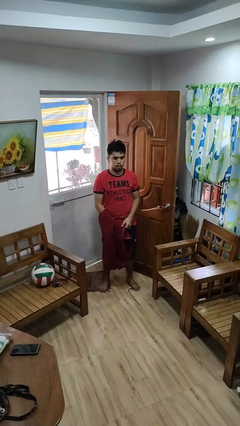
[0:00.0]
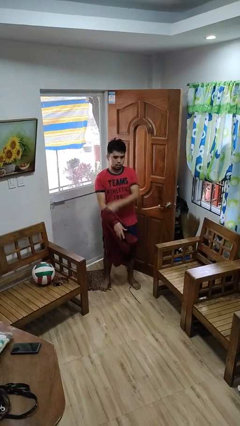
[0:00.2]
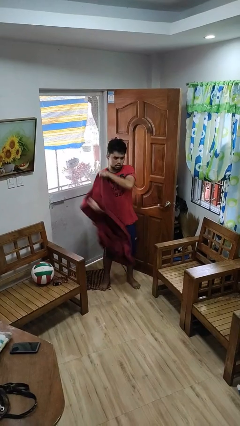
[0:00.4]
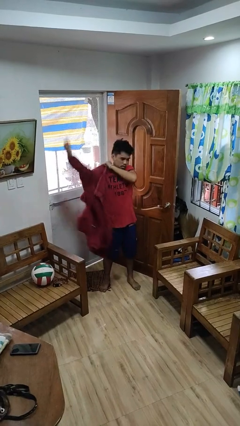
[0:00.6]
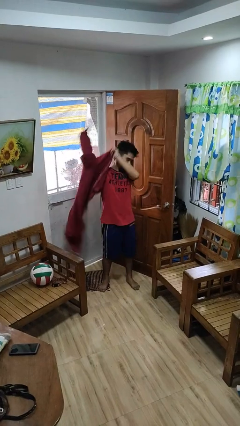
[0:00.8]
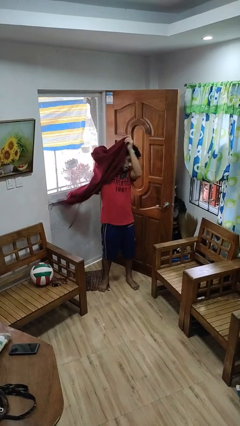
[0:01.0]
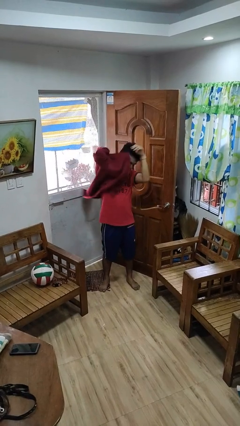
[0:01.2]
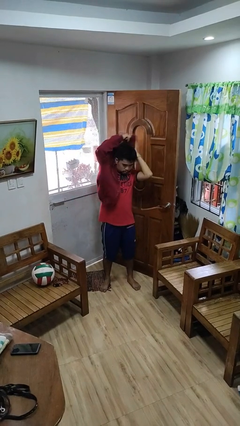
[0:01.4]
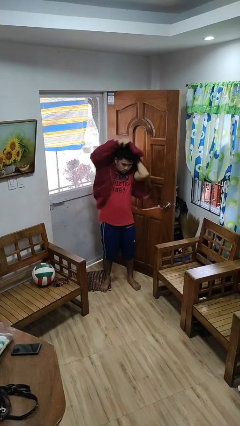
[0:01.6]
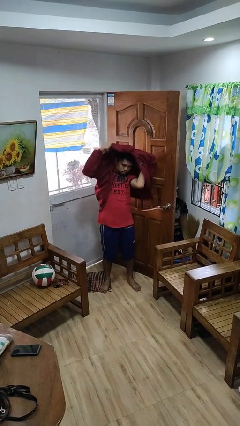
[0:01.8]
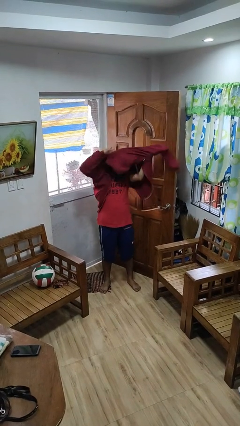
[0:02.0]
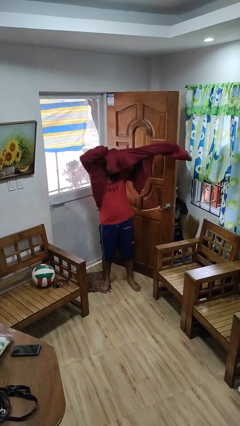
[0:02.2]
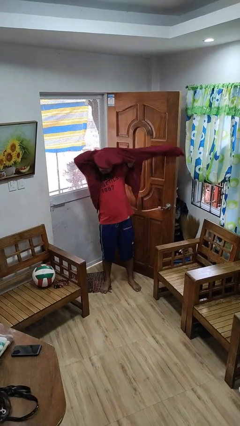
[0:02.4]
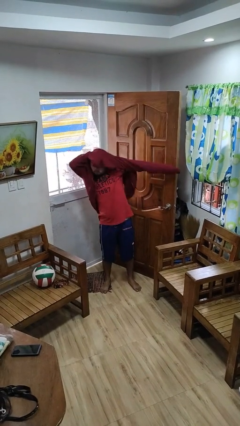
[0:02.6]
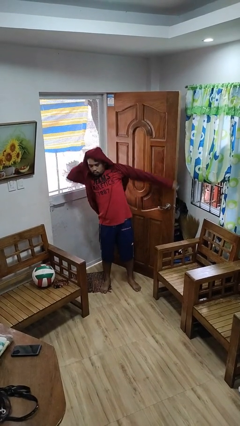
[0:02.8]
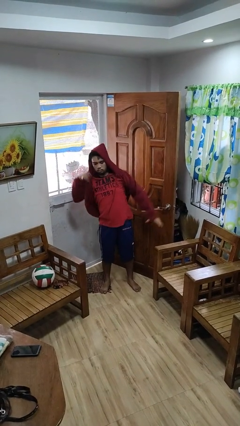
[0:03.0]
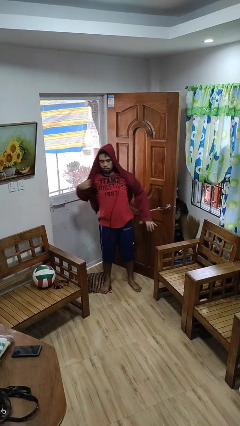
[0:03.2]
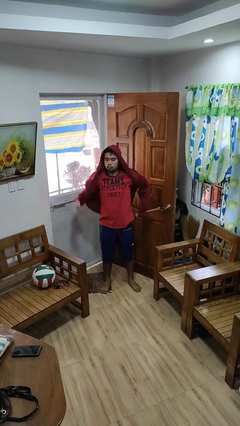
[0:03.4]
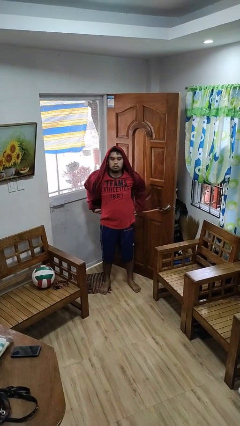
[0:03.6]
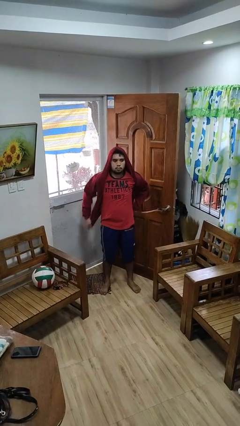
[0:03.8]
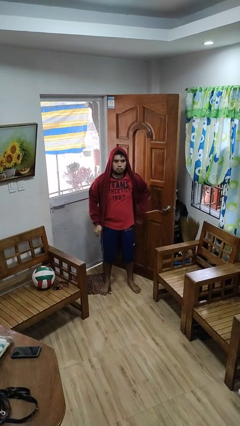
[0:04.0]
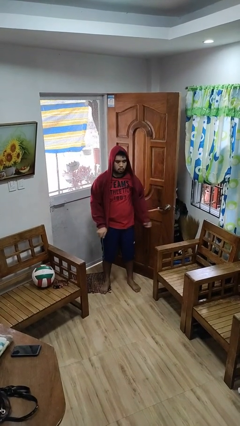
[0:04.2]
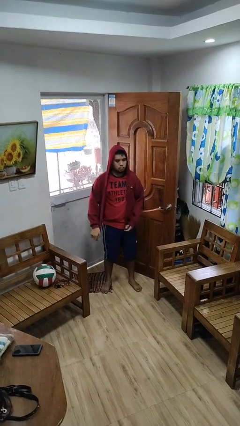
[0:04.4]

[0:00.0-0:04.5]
person puts on hoodie

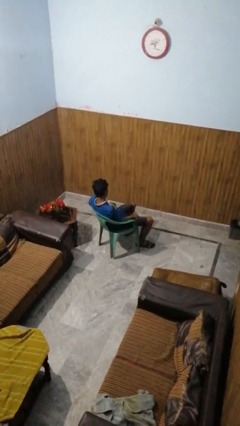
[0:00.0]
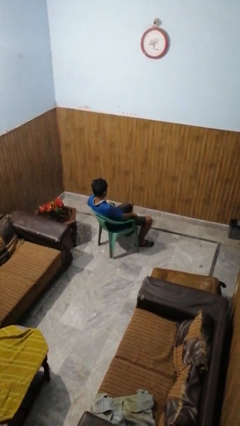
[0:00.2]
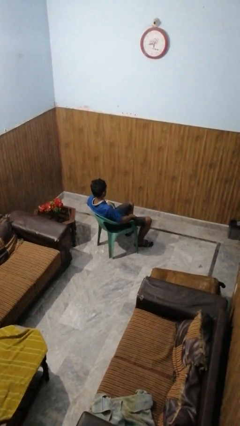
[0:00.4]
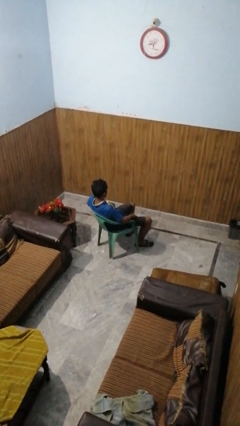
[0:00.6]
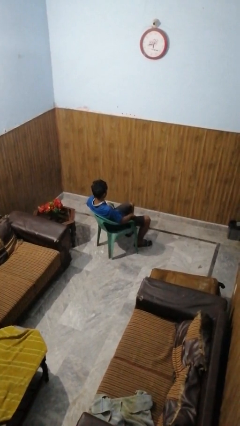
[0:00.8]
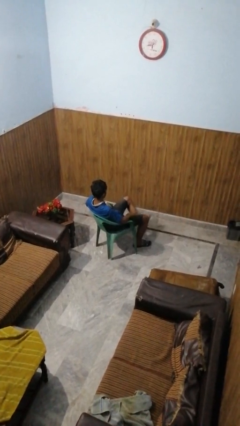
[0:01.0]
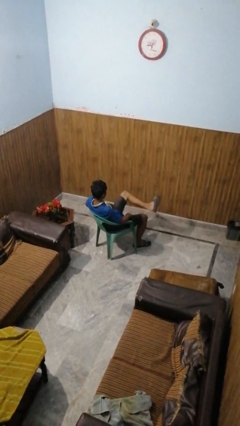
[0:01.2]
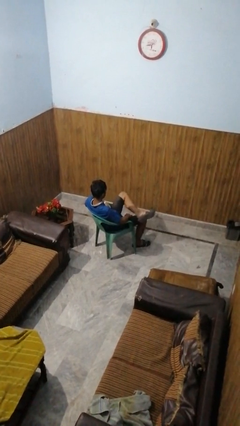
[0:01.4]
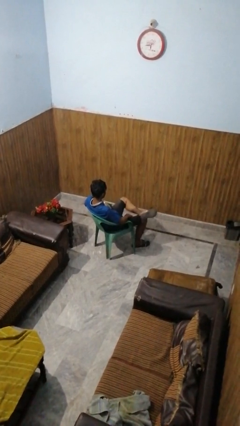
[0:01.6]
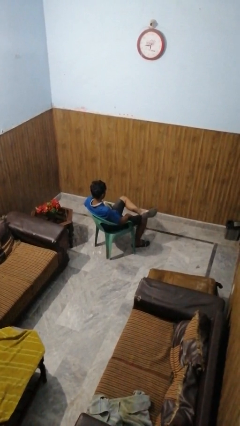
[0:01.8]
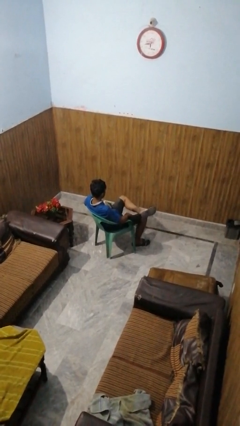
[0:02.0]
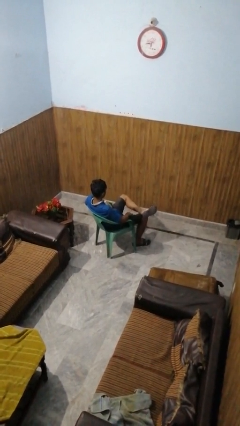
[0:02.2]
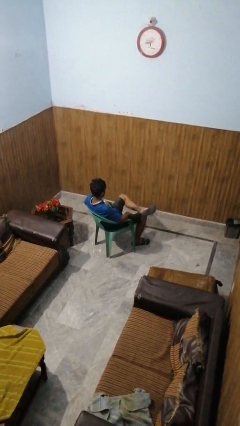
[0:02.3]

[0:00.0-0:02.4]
person crosses legs

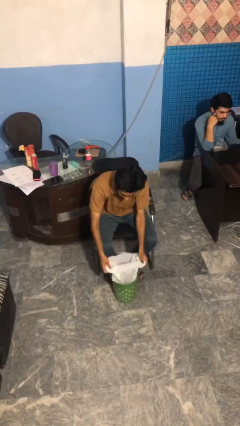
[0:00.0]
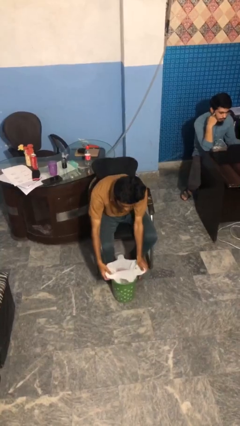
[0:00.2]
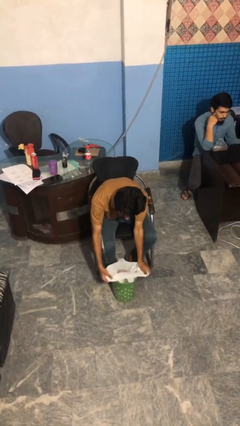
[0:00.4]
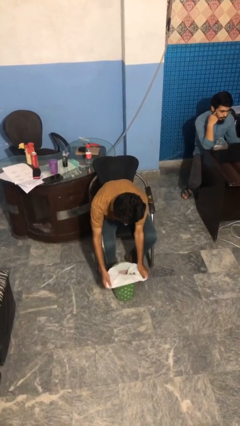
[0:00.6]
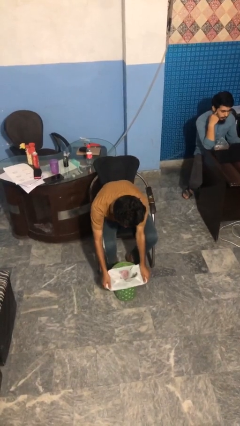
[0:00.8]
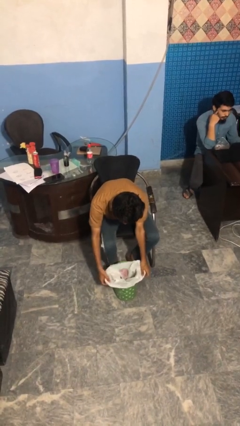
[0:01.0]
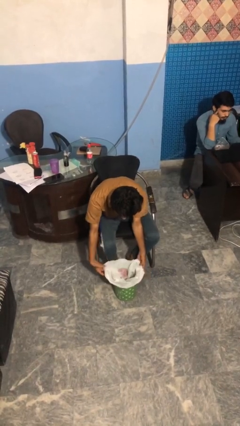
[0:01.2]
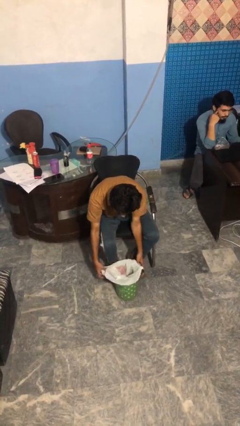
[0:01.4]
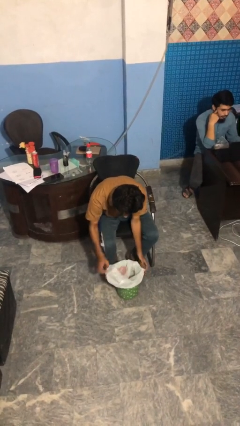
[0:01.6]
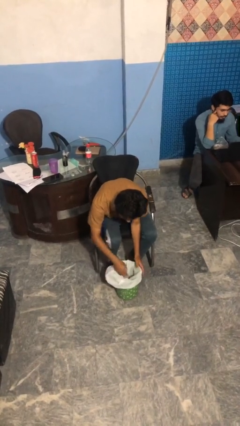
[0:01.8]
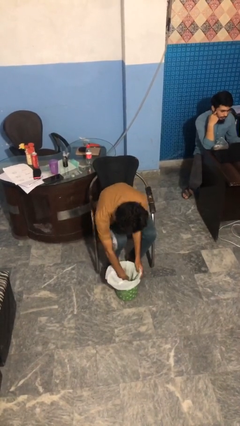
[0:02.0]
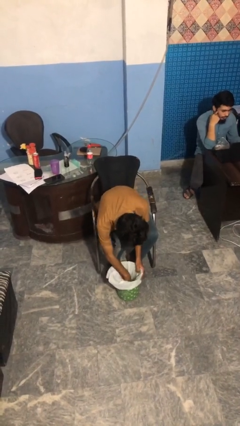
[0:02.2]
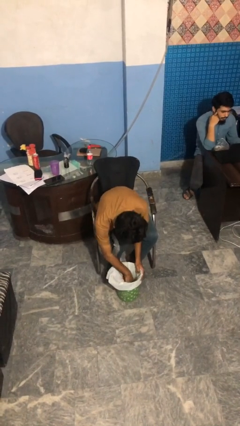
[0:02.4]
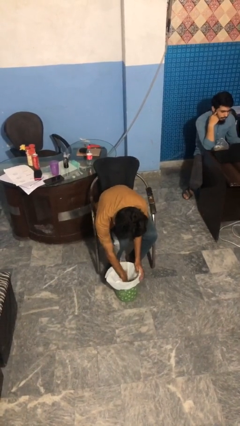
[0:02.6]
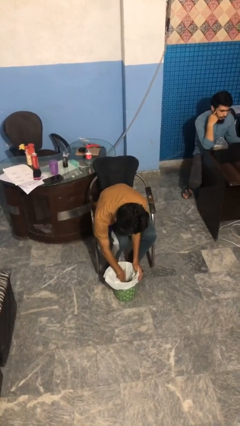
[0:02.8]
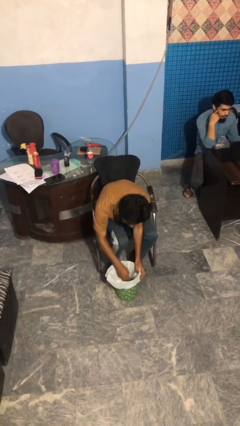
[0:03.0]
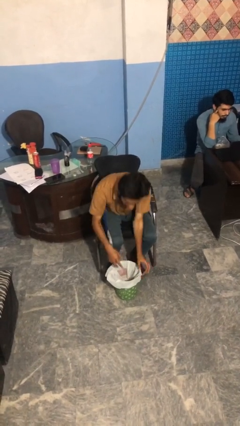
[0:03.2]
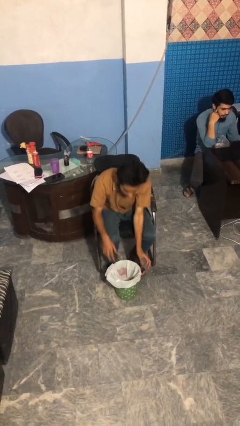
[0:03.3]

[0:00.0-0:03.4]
person inserts trashbag into trashcan

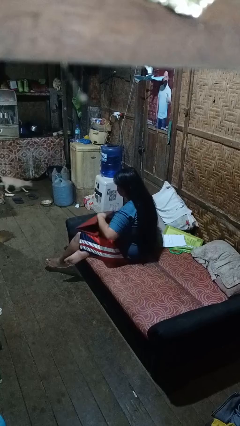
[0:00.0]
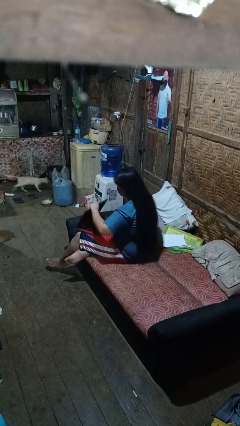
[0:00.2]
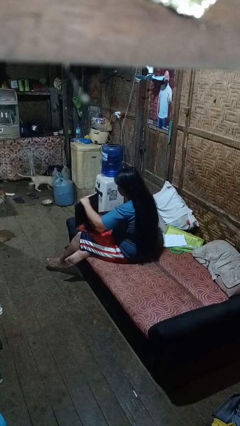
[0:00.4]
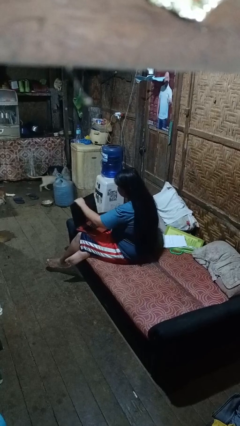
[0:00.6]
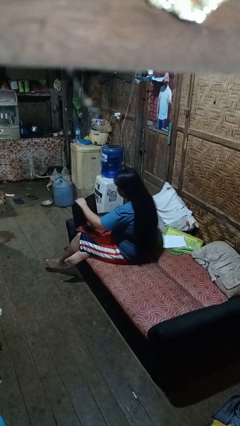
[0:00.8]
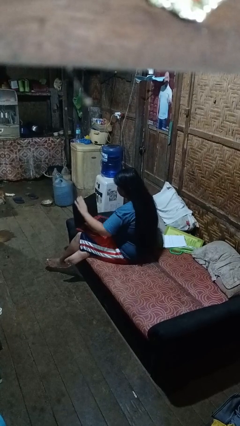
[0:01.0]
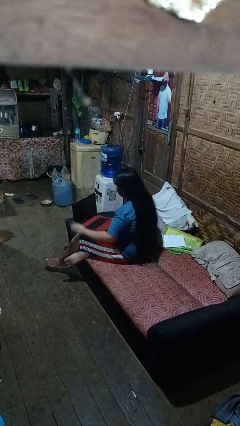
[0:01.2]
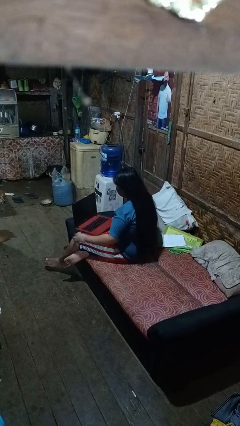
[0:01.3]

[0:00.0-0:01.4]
person opens laptop

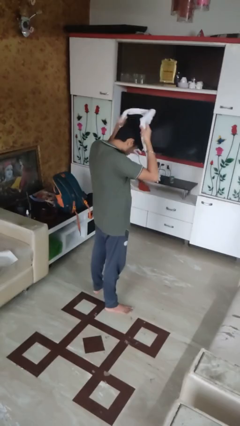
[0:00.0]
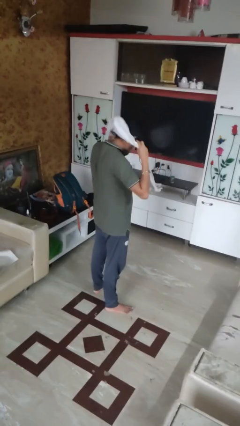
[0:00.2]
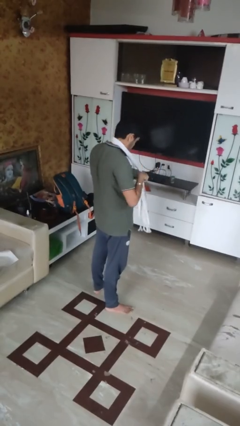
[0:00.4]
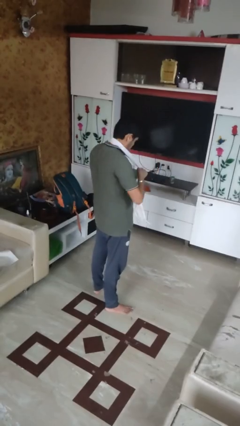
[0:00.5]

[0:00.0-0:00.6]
person puts on scarf

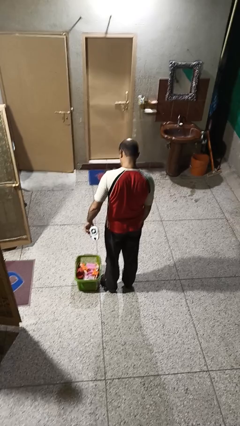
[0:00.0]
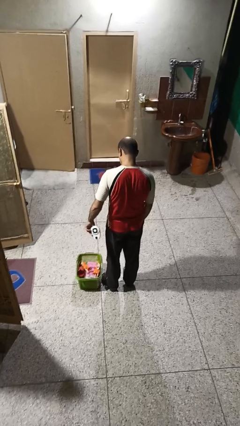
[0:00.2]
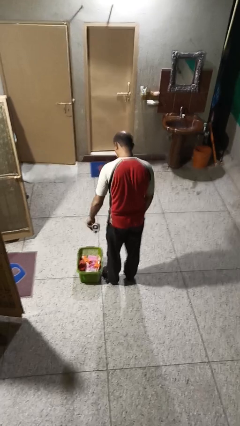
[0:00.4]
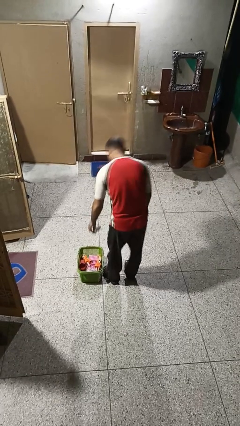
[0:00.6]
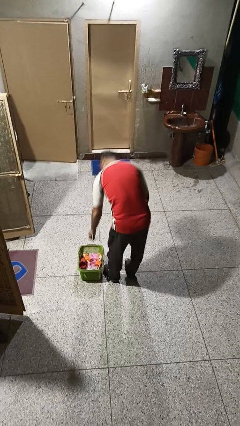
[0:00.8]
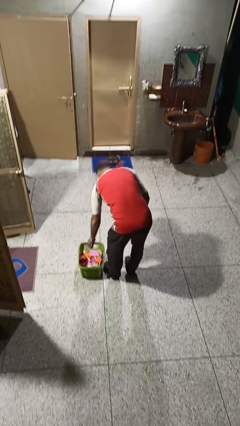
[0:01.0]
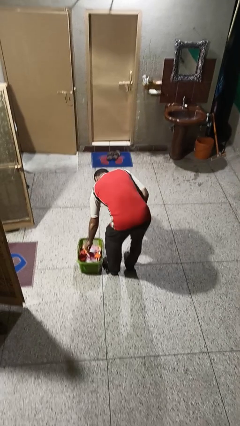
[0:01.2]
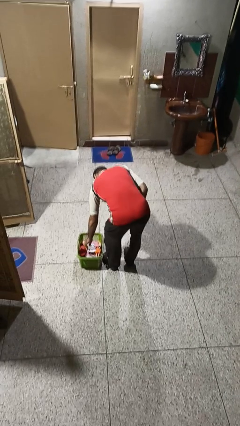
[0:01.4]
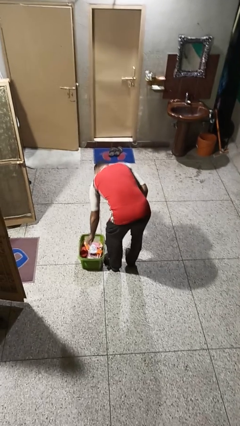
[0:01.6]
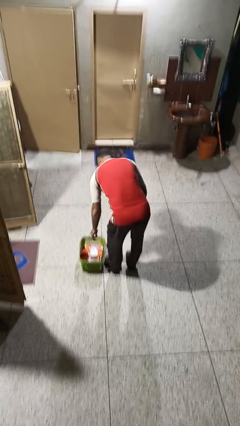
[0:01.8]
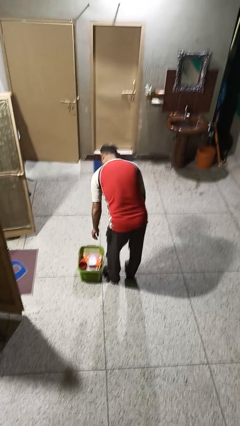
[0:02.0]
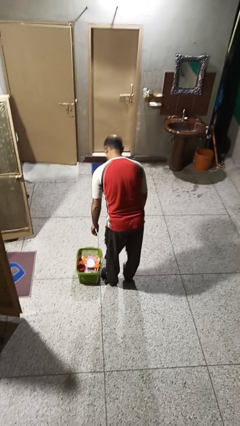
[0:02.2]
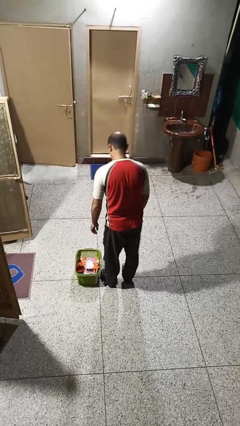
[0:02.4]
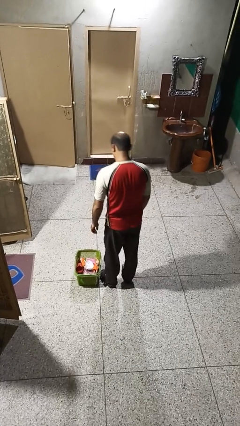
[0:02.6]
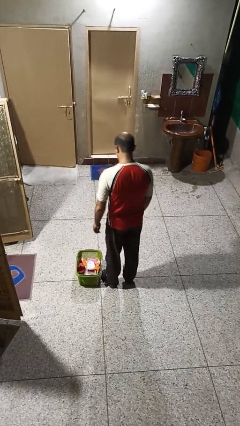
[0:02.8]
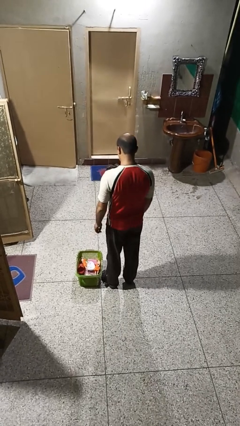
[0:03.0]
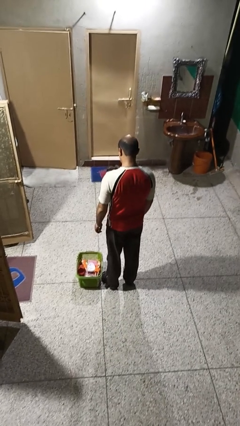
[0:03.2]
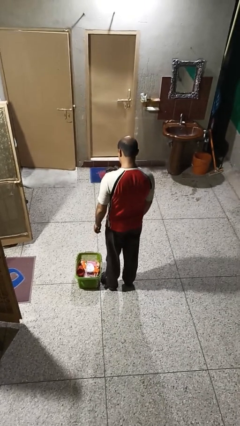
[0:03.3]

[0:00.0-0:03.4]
person puts object into basket

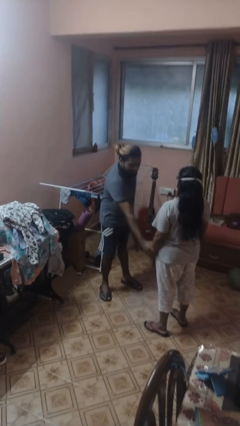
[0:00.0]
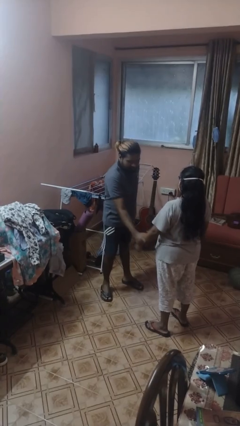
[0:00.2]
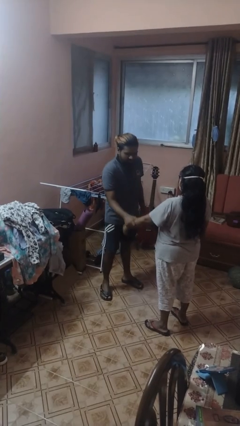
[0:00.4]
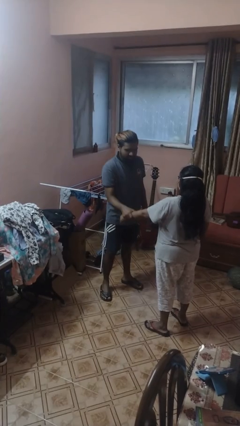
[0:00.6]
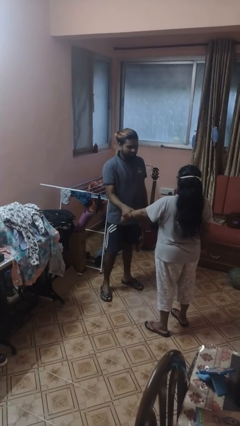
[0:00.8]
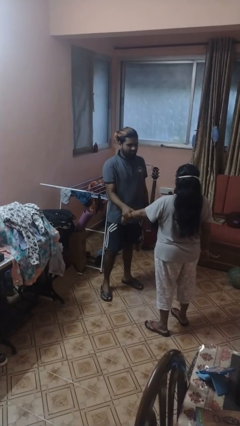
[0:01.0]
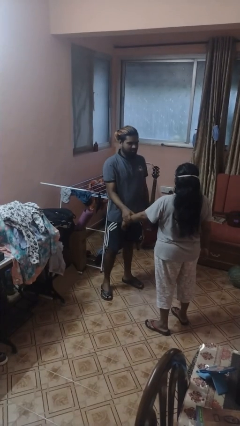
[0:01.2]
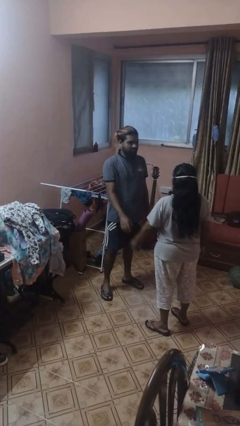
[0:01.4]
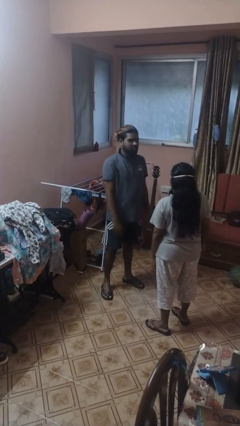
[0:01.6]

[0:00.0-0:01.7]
person grabs person by forearm
